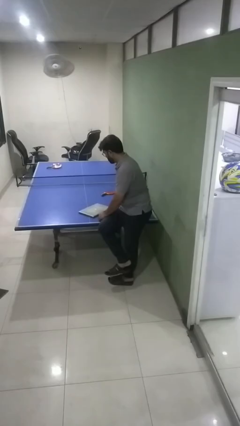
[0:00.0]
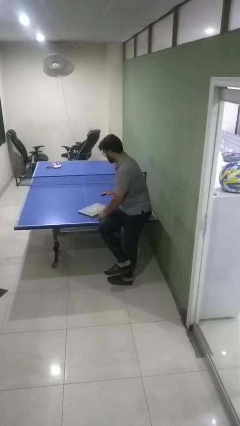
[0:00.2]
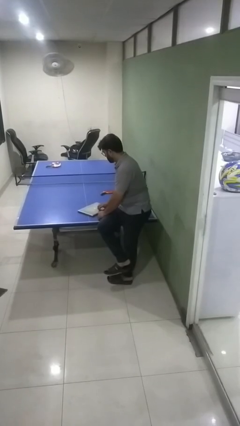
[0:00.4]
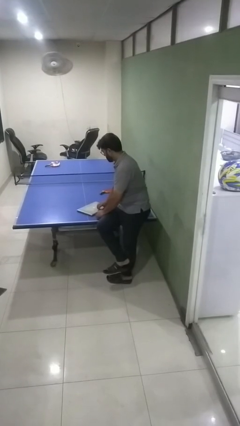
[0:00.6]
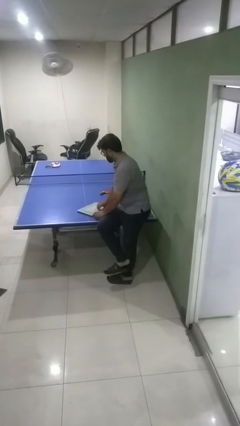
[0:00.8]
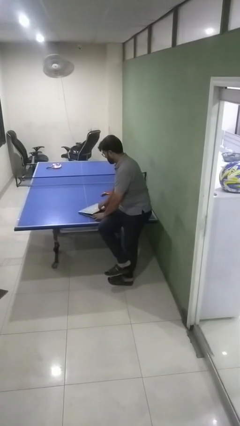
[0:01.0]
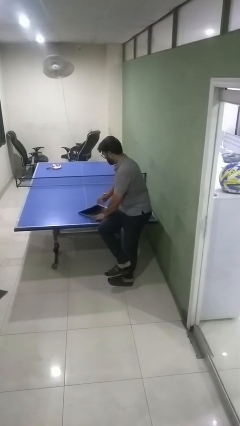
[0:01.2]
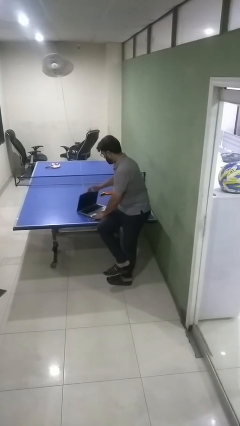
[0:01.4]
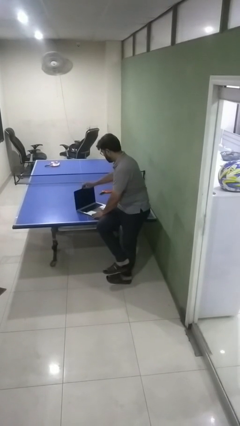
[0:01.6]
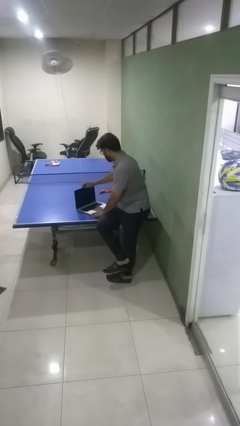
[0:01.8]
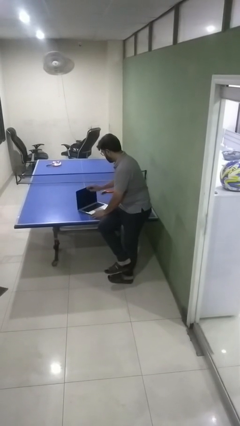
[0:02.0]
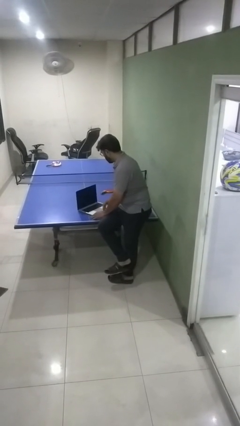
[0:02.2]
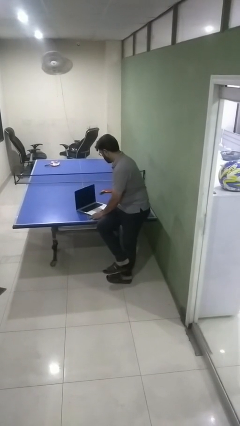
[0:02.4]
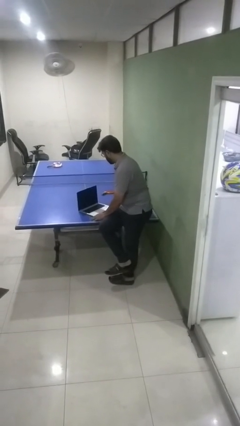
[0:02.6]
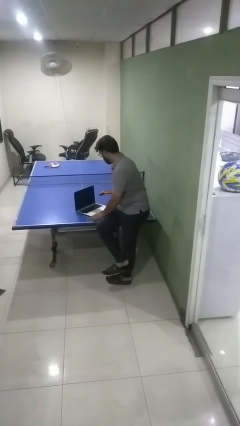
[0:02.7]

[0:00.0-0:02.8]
person opens laptop

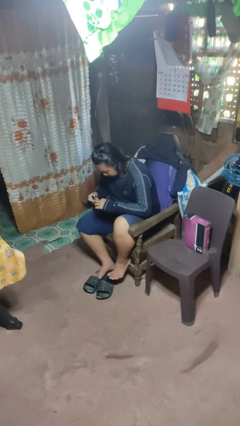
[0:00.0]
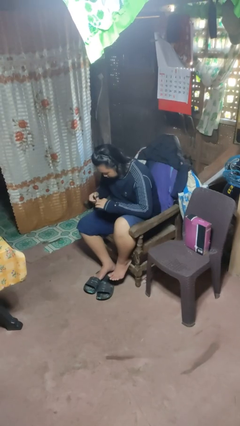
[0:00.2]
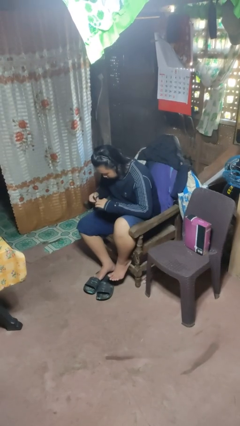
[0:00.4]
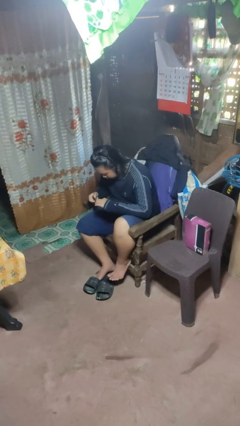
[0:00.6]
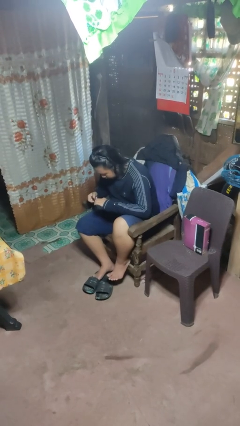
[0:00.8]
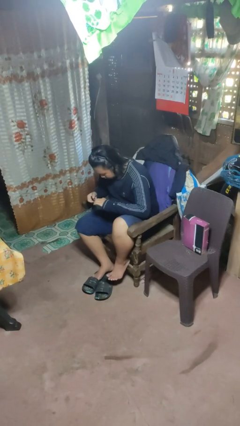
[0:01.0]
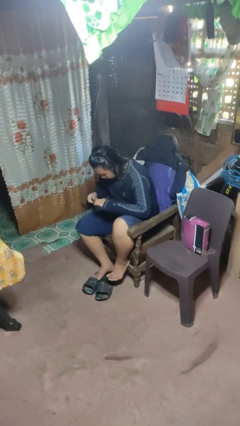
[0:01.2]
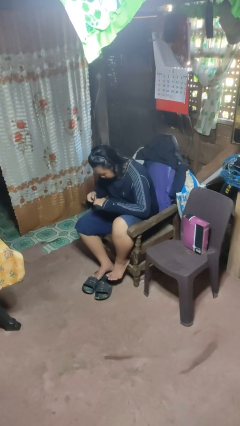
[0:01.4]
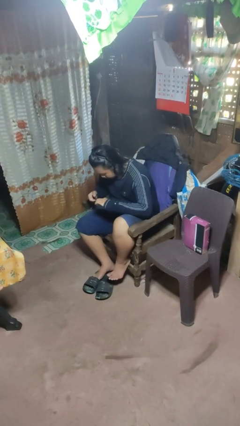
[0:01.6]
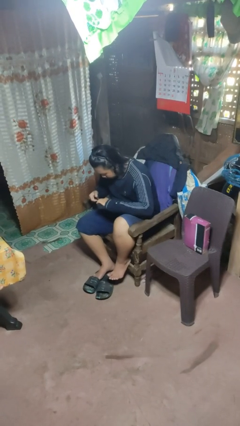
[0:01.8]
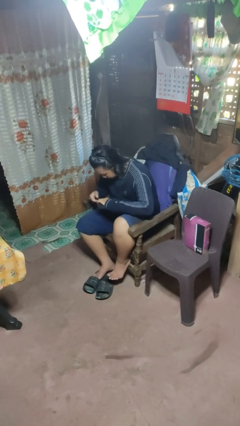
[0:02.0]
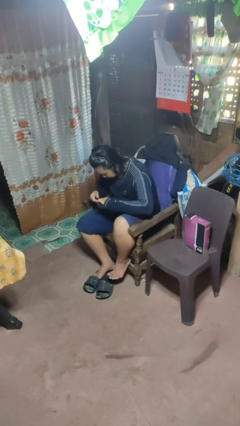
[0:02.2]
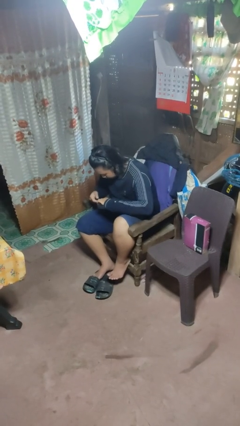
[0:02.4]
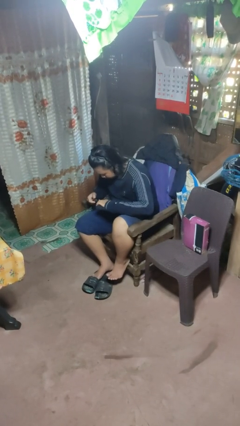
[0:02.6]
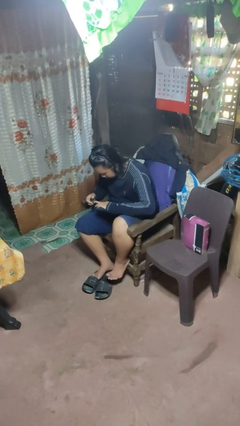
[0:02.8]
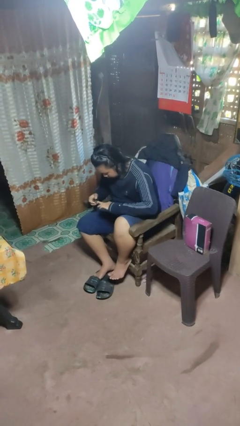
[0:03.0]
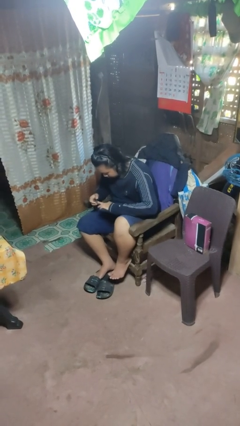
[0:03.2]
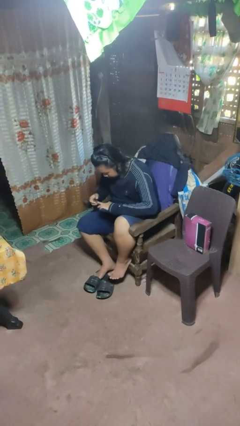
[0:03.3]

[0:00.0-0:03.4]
person clips fingernails

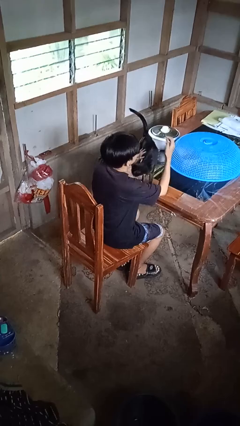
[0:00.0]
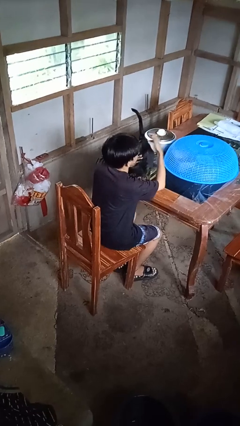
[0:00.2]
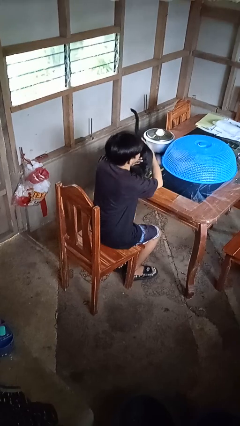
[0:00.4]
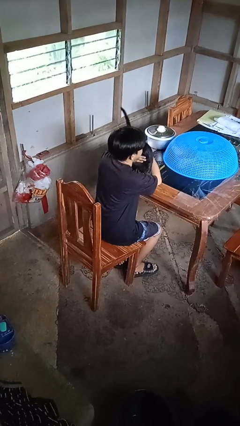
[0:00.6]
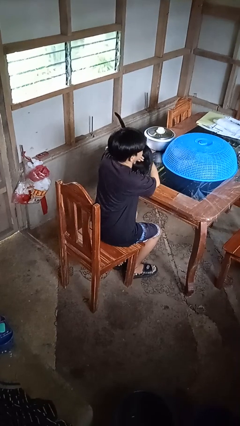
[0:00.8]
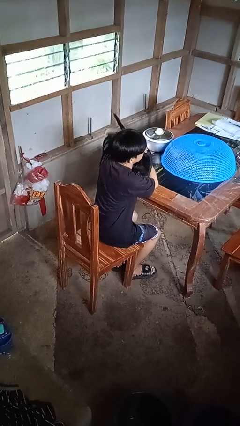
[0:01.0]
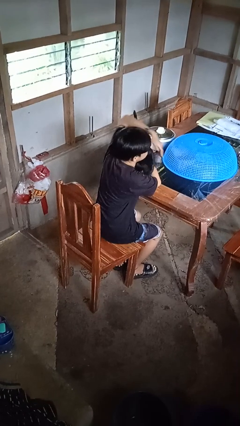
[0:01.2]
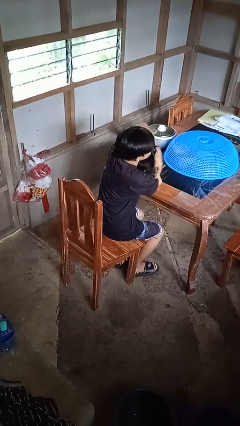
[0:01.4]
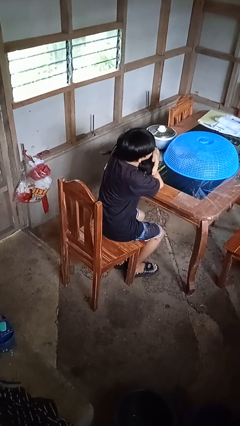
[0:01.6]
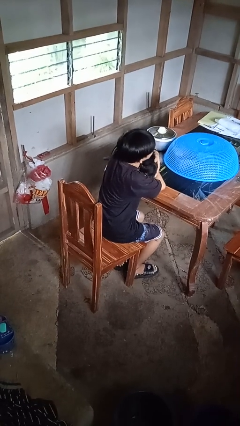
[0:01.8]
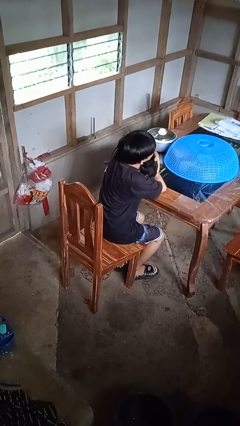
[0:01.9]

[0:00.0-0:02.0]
person hugs cat

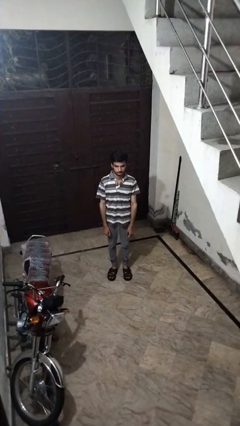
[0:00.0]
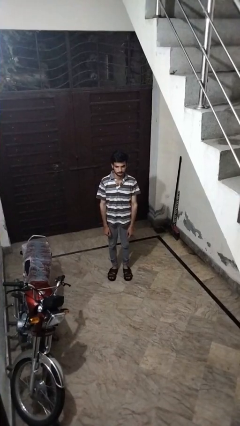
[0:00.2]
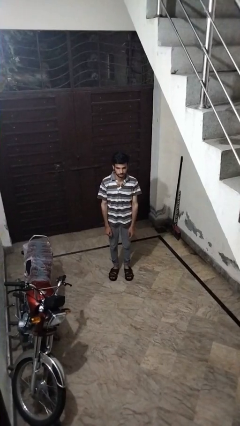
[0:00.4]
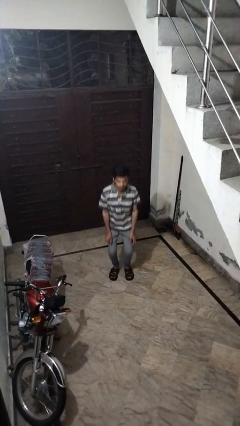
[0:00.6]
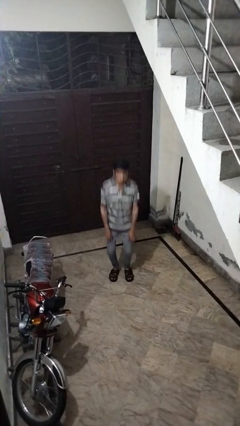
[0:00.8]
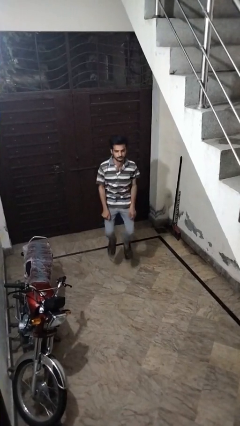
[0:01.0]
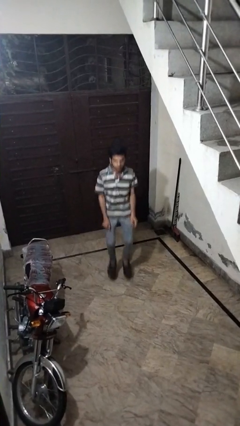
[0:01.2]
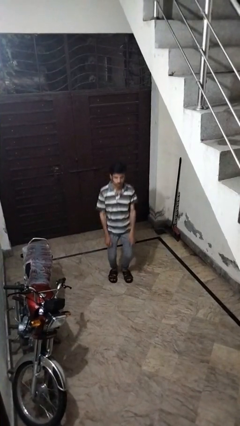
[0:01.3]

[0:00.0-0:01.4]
person jumps

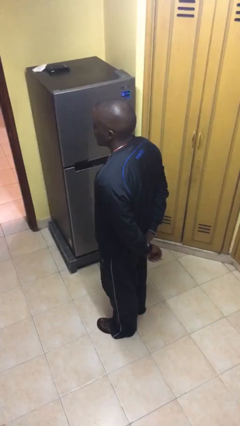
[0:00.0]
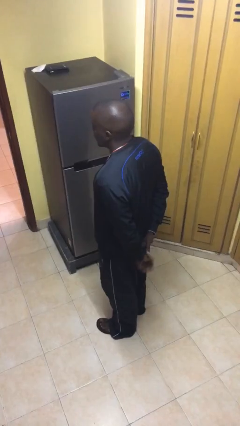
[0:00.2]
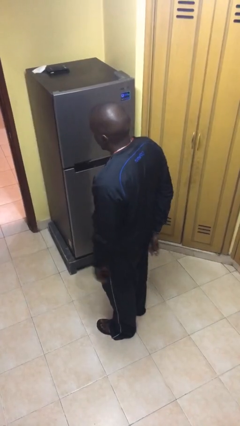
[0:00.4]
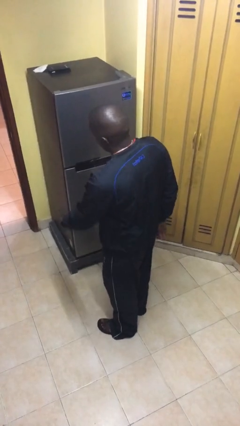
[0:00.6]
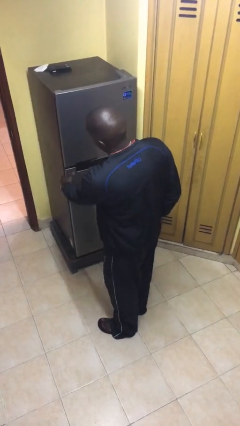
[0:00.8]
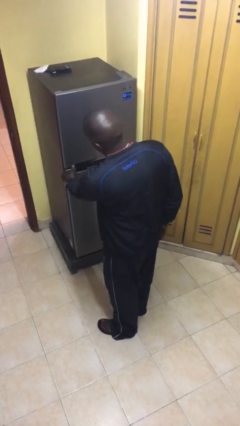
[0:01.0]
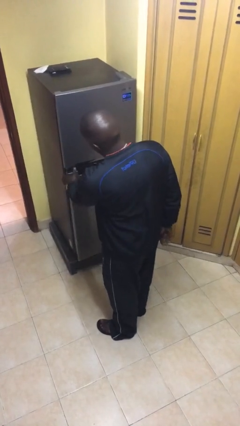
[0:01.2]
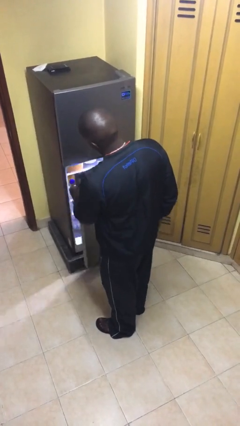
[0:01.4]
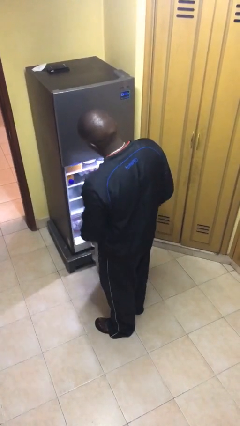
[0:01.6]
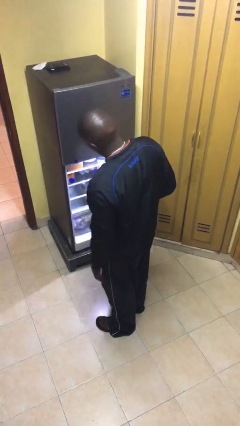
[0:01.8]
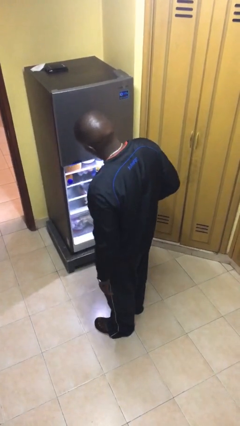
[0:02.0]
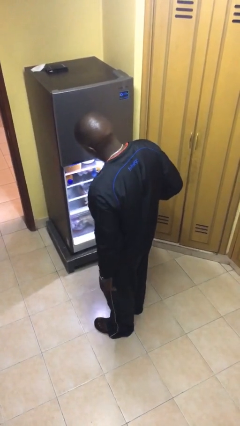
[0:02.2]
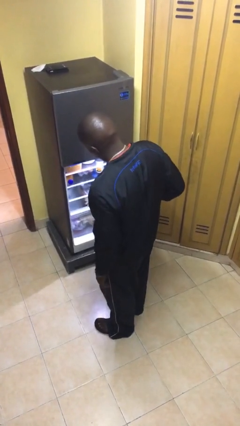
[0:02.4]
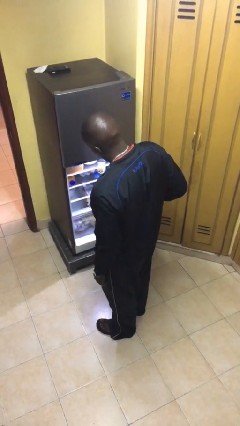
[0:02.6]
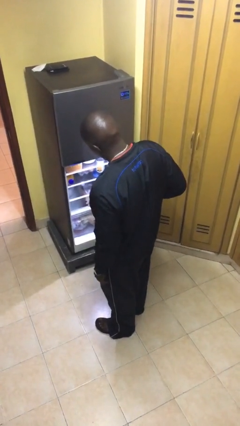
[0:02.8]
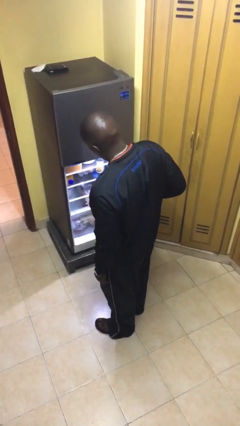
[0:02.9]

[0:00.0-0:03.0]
person opens refrigerator

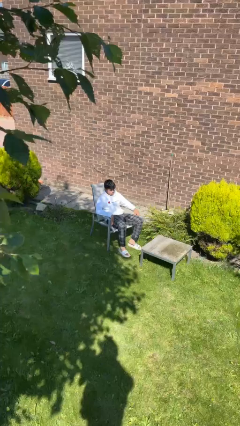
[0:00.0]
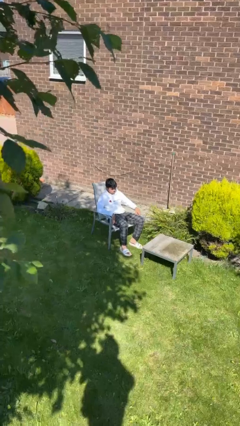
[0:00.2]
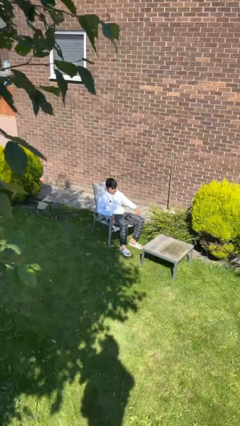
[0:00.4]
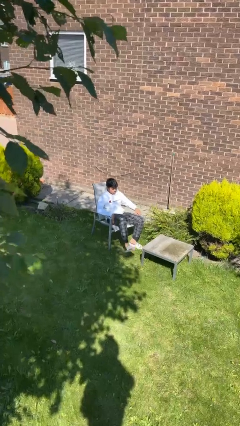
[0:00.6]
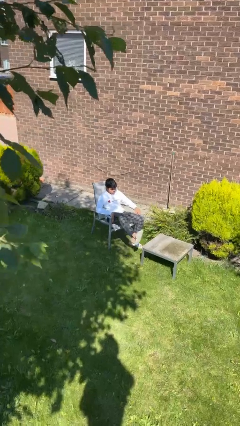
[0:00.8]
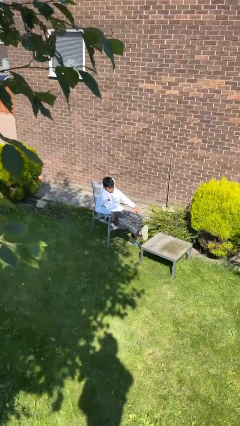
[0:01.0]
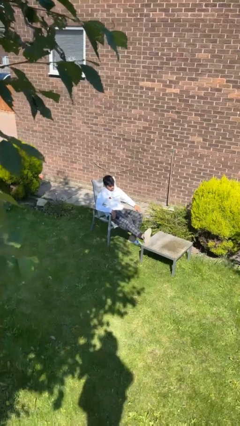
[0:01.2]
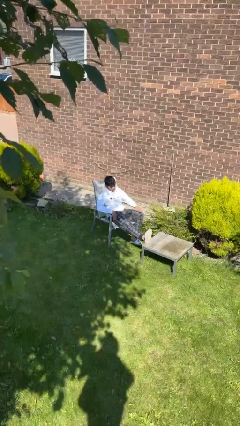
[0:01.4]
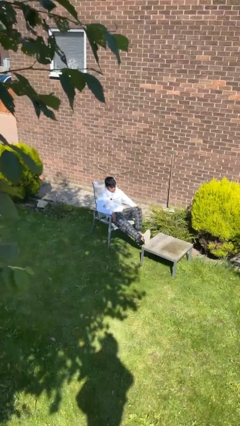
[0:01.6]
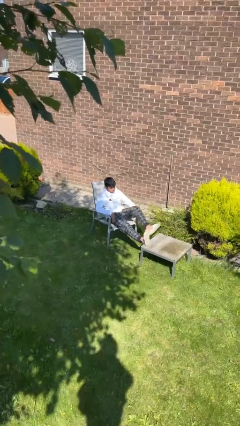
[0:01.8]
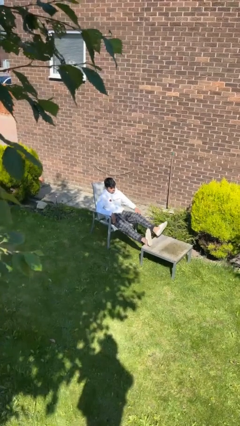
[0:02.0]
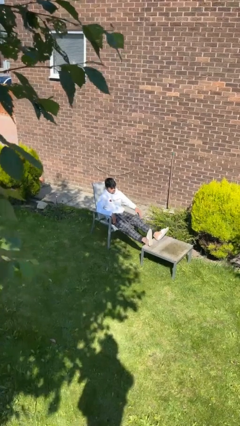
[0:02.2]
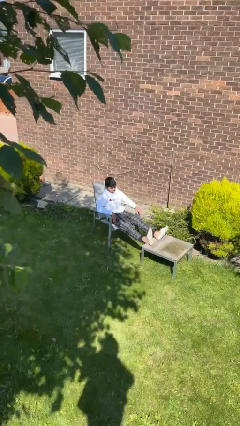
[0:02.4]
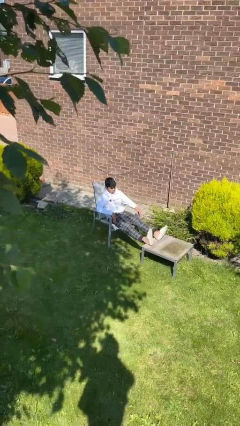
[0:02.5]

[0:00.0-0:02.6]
person puts feet up

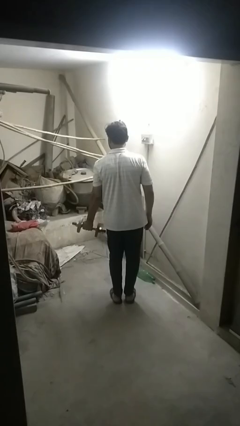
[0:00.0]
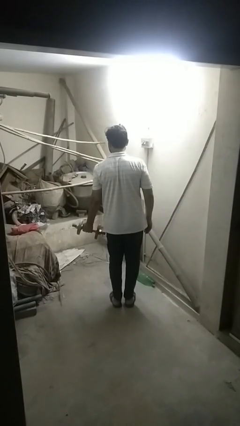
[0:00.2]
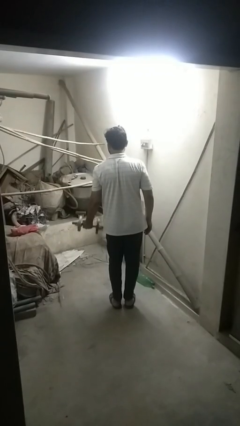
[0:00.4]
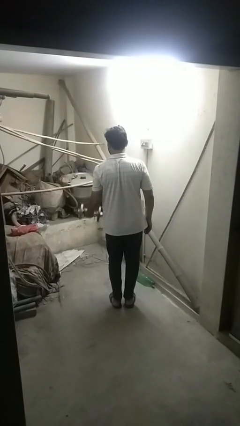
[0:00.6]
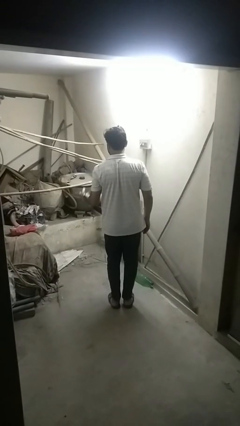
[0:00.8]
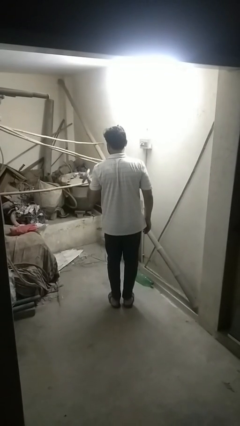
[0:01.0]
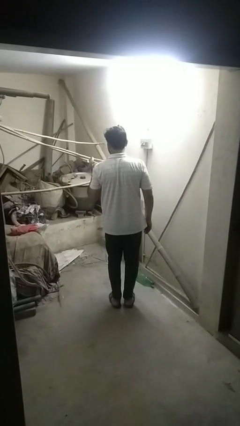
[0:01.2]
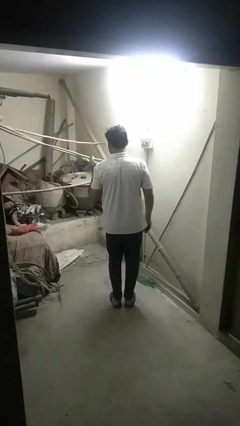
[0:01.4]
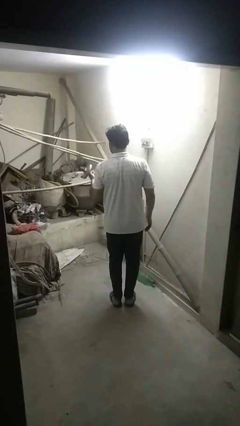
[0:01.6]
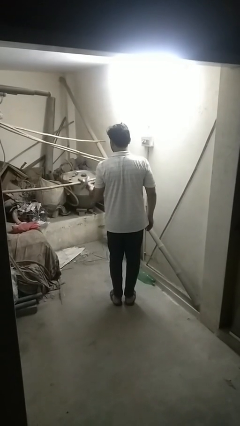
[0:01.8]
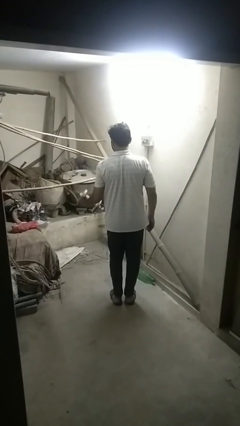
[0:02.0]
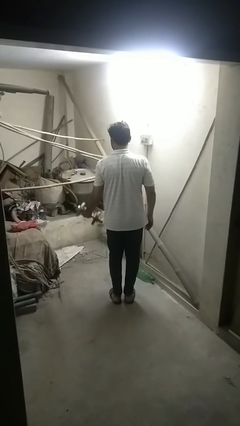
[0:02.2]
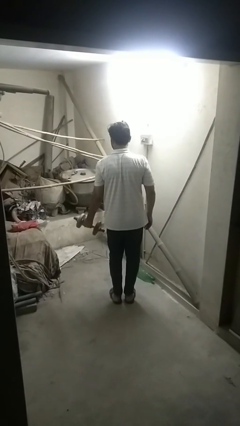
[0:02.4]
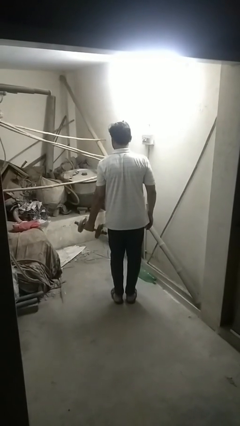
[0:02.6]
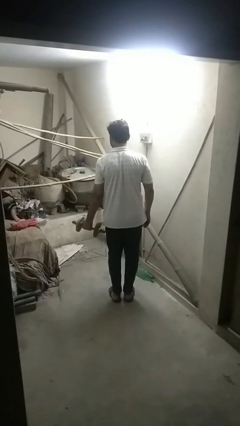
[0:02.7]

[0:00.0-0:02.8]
person lifts dumbbells
